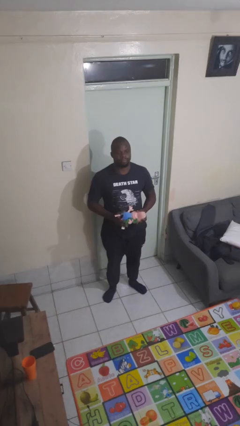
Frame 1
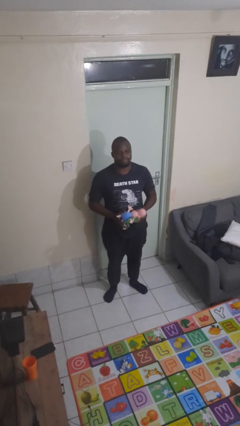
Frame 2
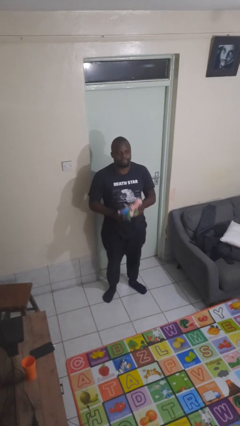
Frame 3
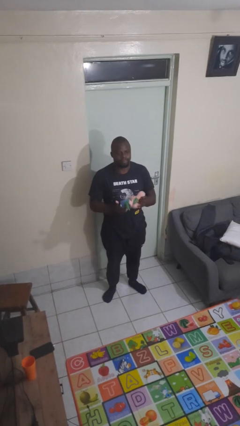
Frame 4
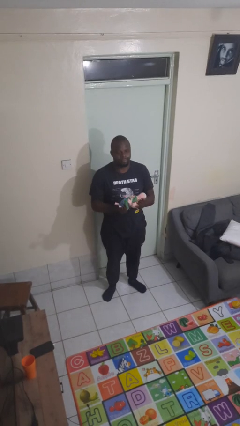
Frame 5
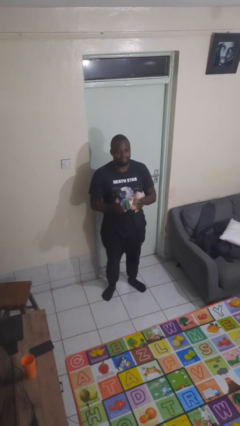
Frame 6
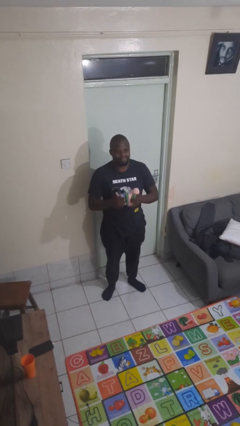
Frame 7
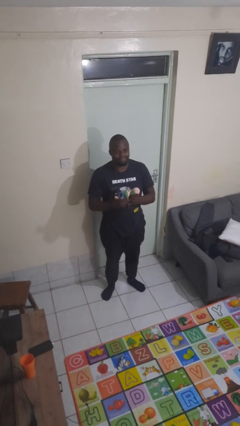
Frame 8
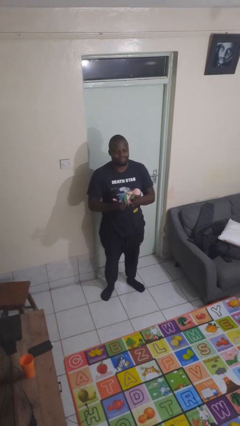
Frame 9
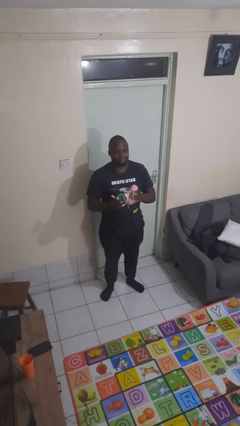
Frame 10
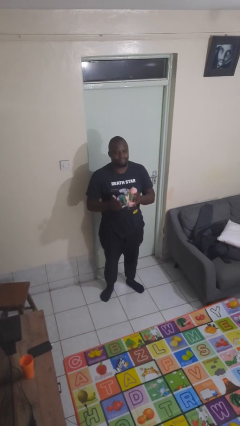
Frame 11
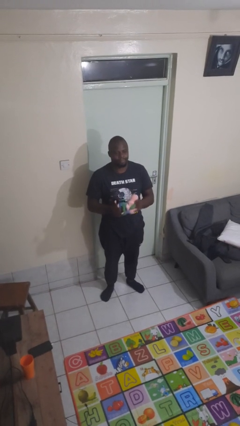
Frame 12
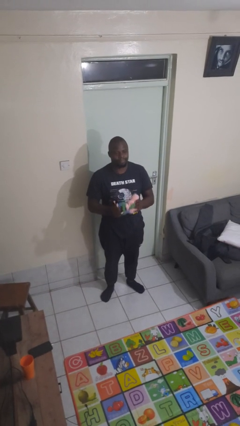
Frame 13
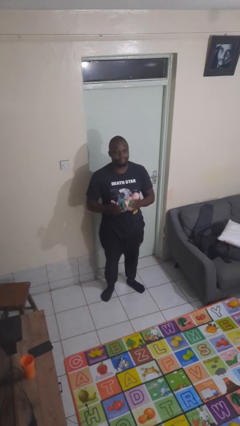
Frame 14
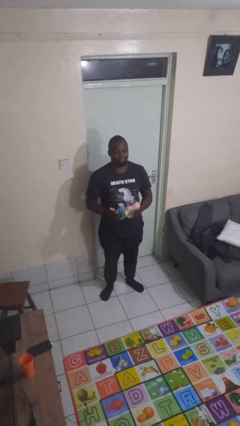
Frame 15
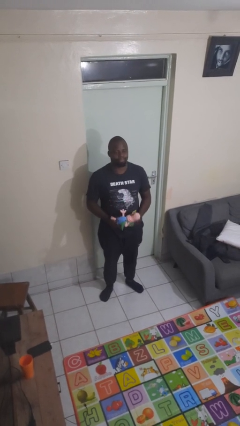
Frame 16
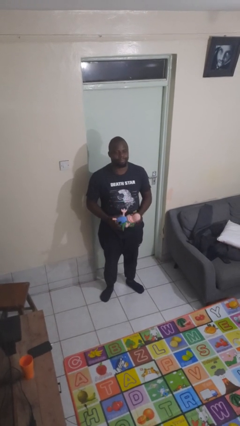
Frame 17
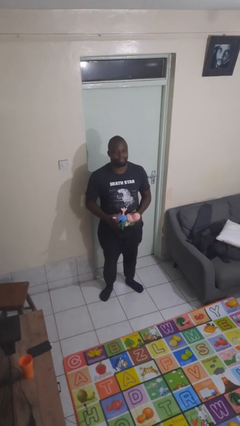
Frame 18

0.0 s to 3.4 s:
person squeezes object

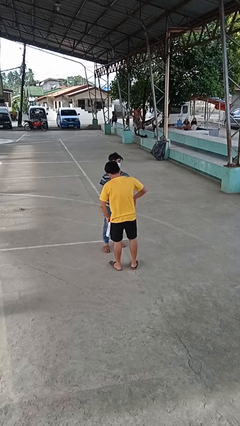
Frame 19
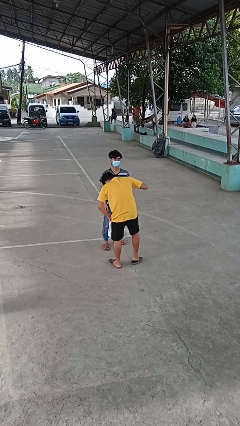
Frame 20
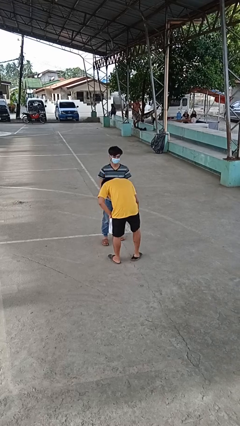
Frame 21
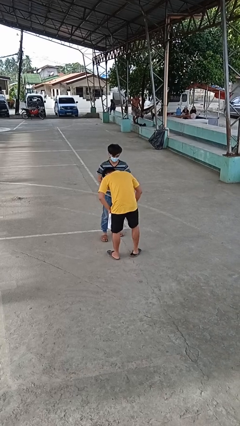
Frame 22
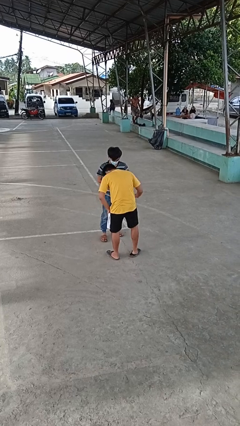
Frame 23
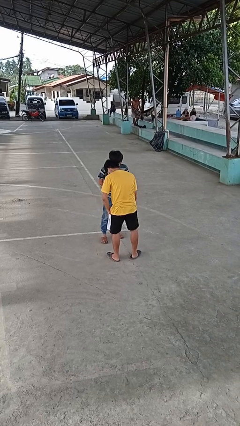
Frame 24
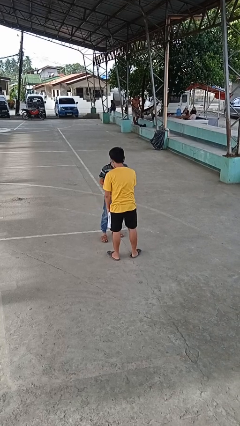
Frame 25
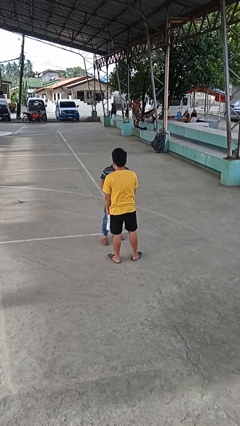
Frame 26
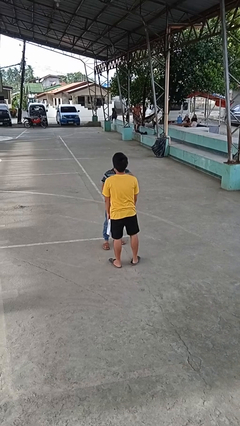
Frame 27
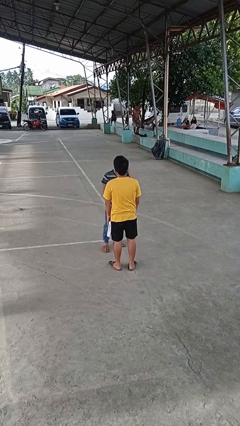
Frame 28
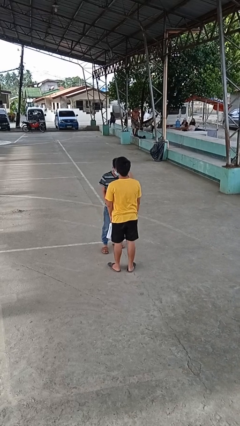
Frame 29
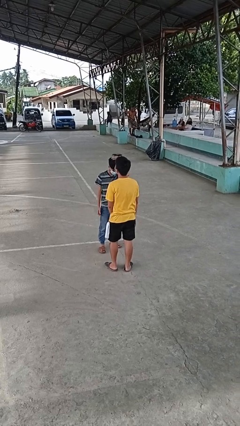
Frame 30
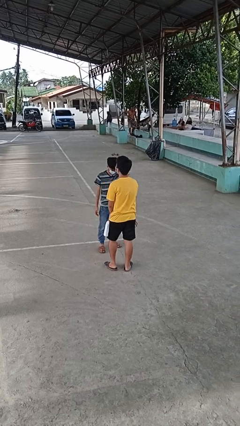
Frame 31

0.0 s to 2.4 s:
person laughs with person

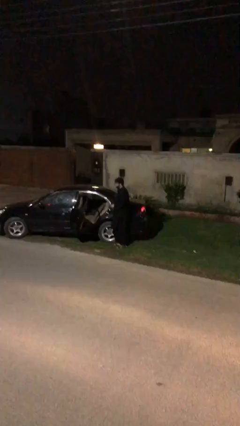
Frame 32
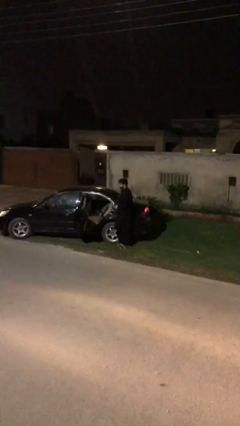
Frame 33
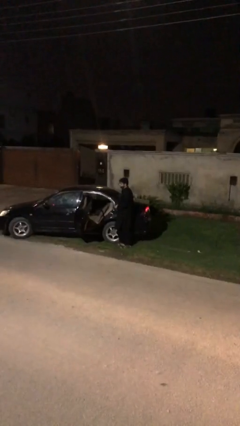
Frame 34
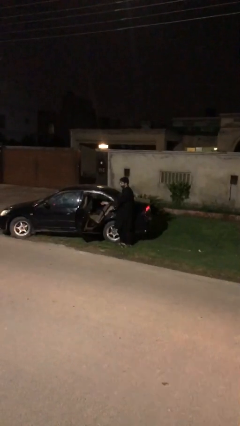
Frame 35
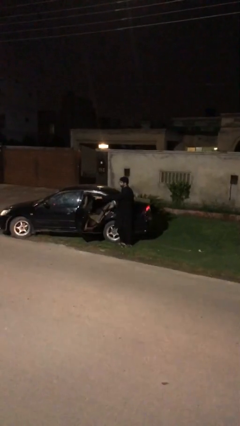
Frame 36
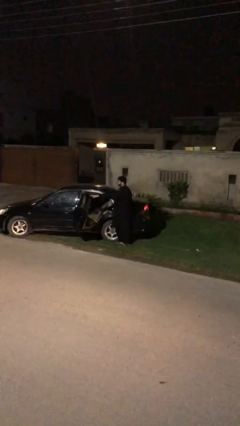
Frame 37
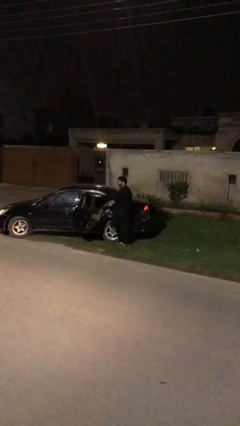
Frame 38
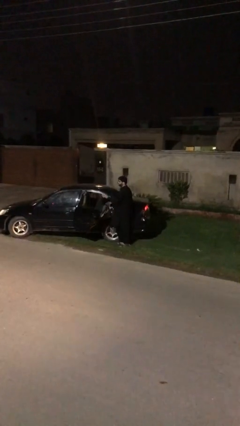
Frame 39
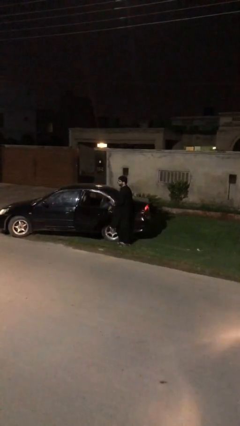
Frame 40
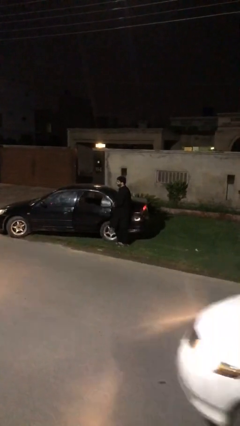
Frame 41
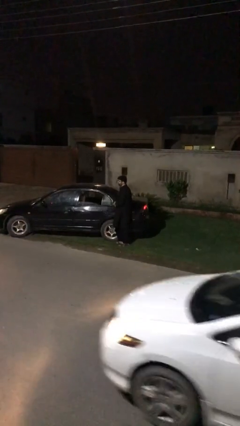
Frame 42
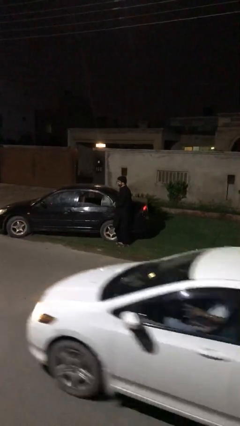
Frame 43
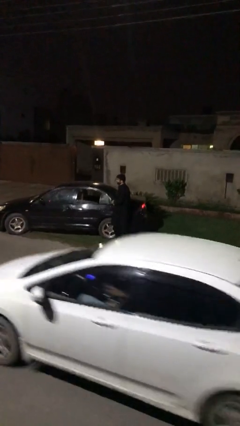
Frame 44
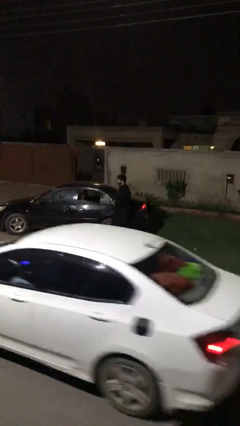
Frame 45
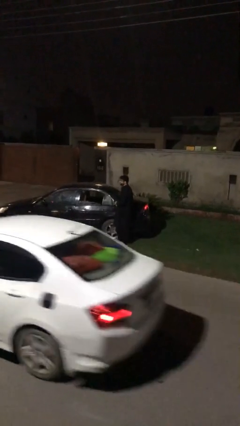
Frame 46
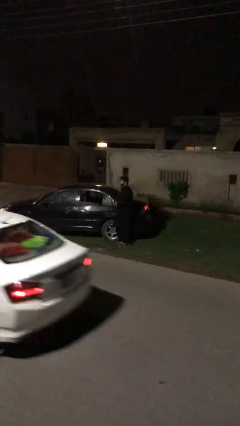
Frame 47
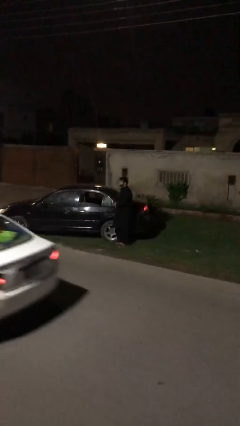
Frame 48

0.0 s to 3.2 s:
person closes car door

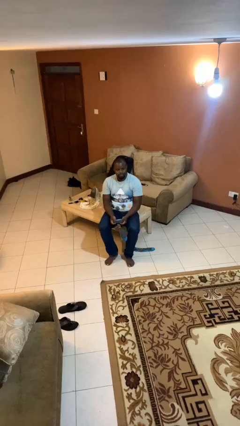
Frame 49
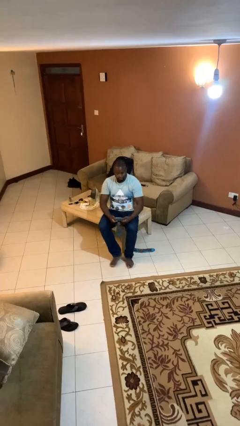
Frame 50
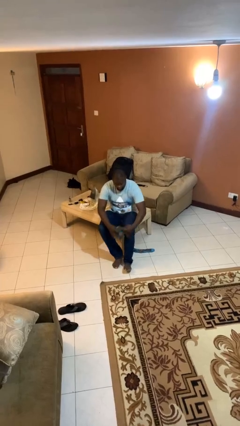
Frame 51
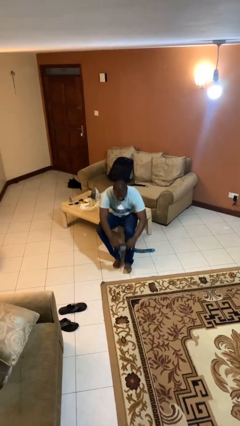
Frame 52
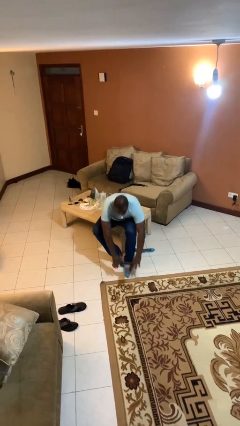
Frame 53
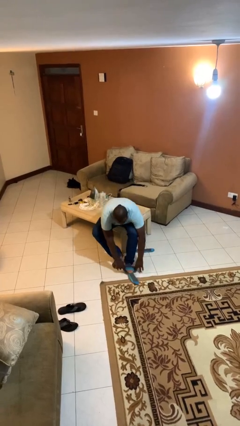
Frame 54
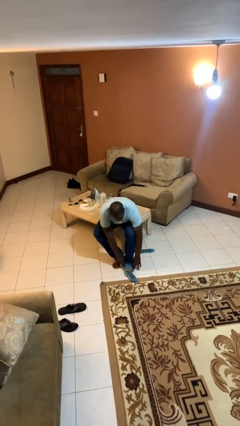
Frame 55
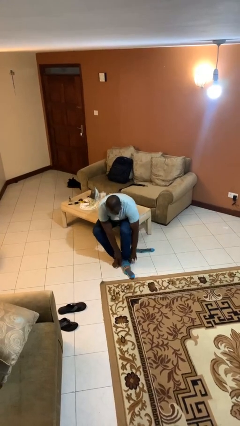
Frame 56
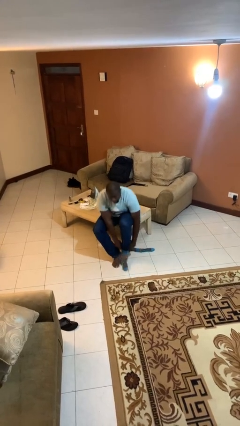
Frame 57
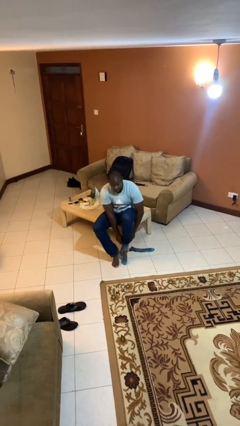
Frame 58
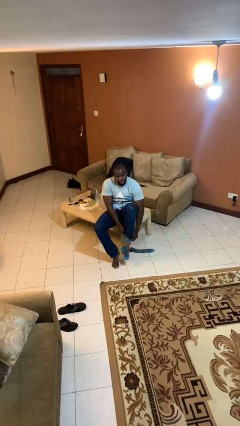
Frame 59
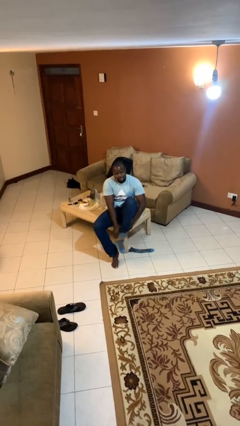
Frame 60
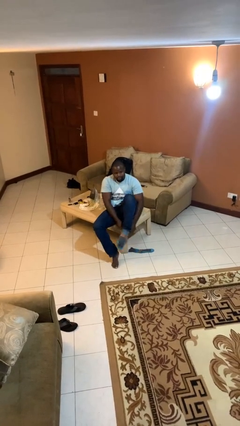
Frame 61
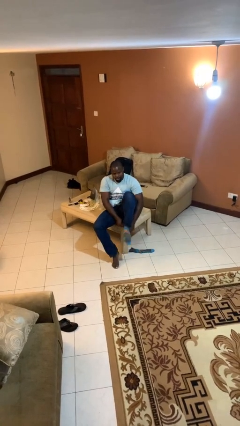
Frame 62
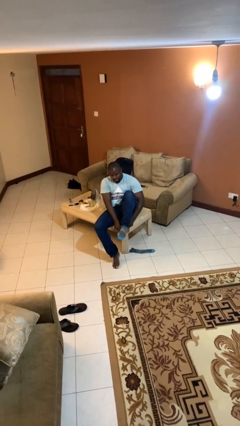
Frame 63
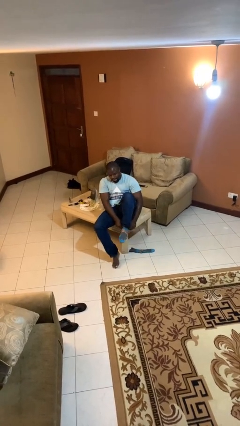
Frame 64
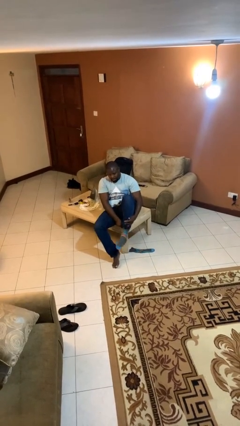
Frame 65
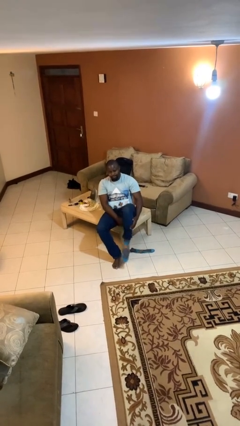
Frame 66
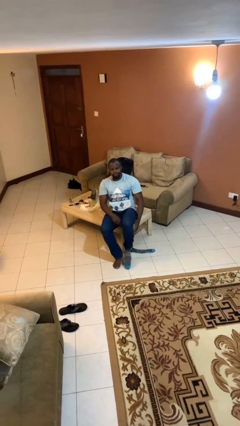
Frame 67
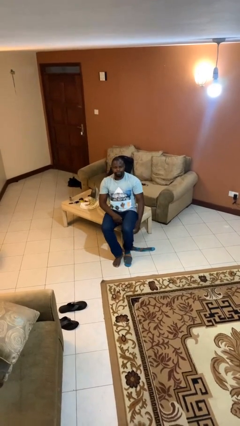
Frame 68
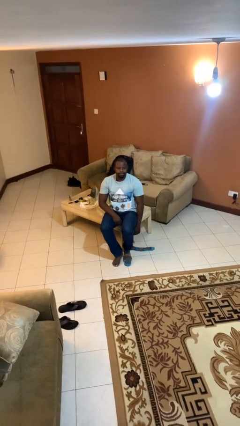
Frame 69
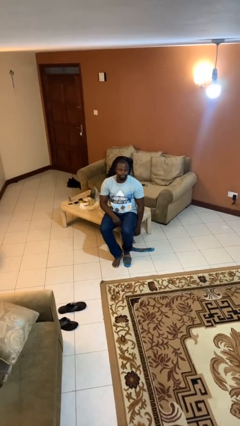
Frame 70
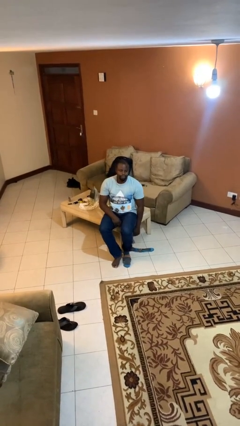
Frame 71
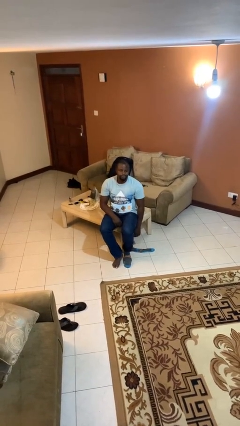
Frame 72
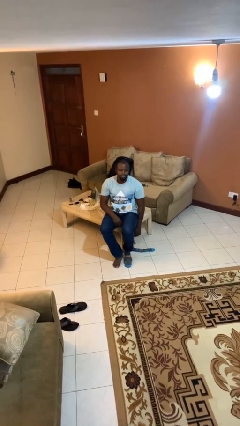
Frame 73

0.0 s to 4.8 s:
person puts on socks

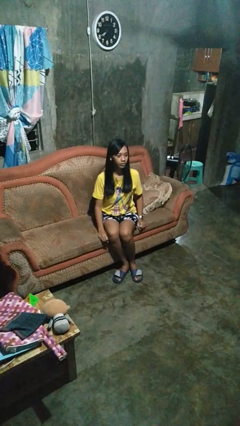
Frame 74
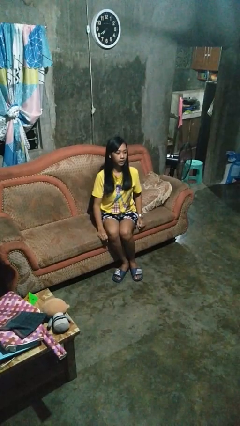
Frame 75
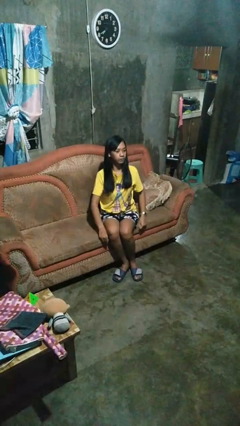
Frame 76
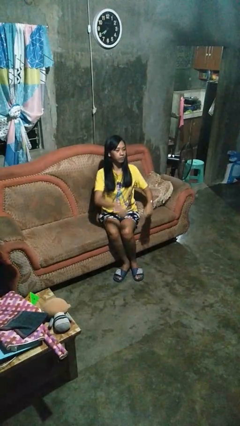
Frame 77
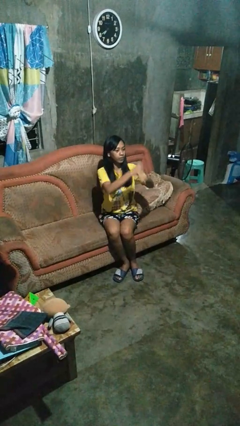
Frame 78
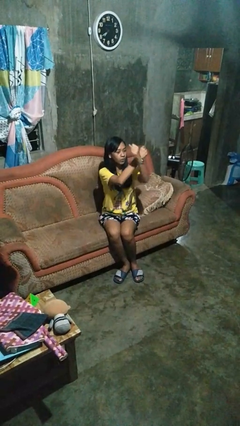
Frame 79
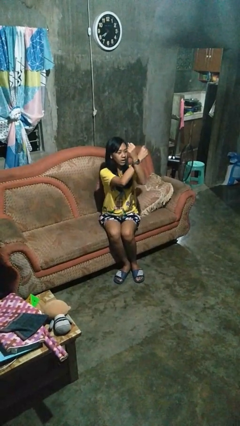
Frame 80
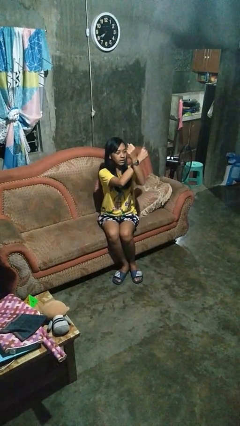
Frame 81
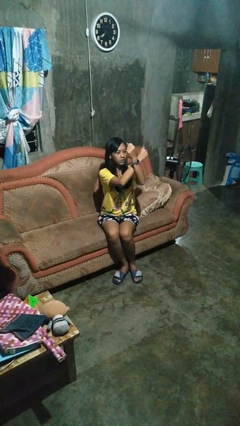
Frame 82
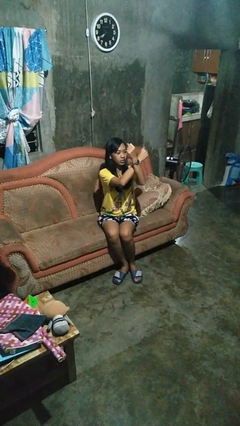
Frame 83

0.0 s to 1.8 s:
person gestures arms x

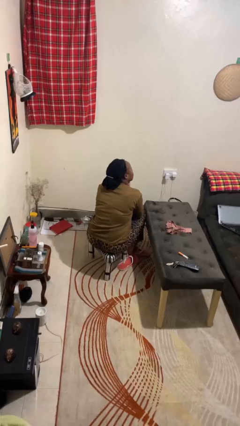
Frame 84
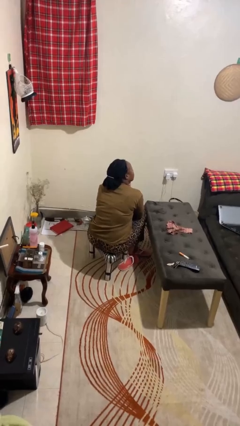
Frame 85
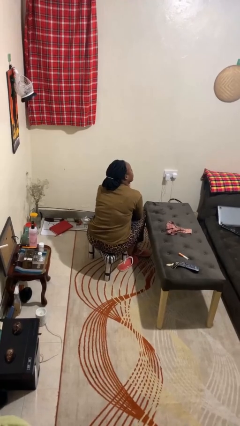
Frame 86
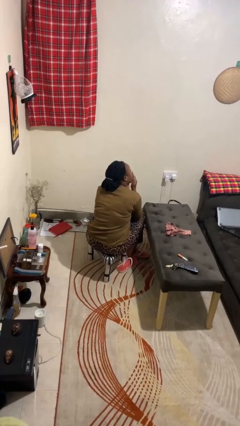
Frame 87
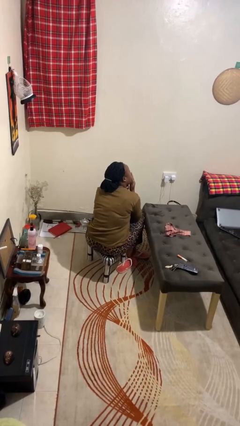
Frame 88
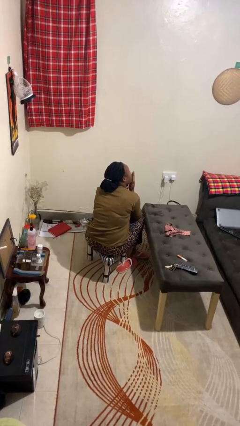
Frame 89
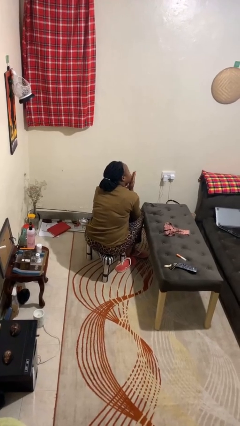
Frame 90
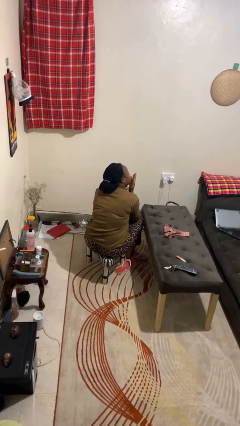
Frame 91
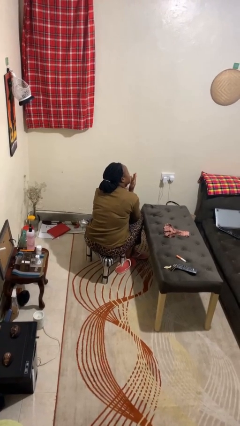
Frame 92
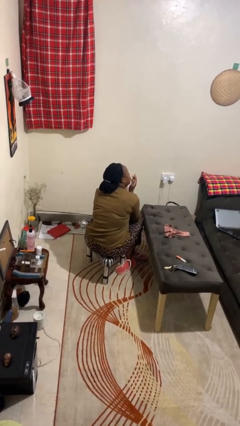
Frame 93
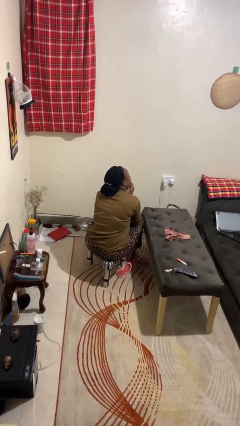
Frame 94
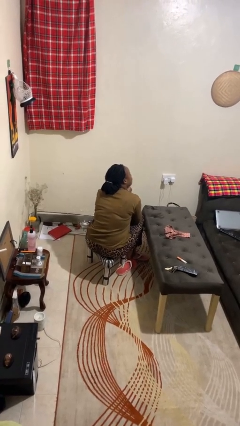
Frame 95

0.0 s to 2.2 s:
person gestures blow kiss
